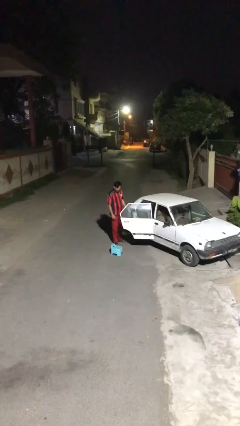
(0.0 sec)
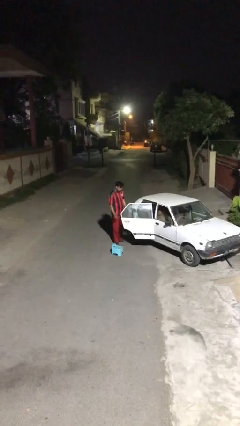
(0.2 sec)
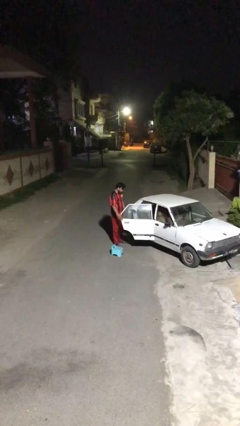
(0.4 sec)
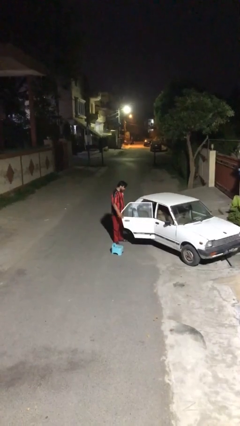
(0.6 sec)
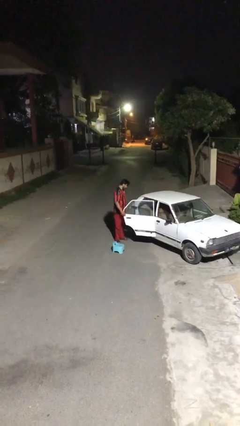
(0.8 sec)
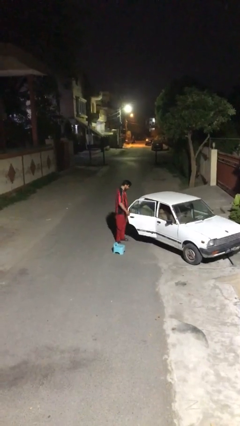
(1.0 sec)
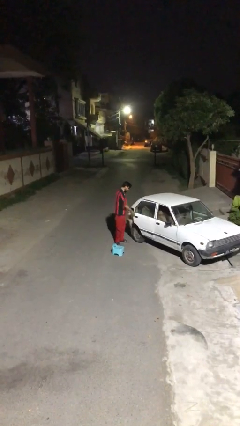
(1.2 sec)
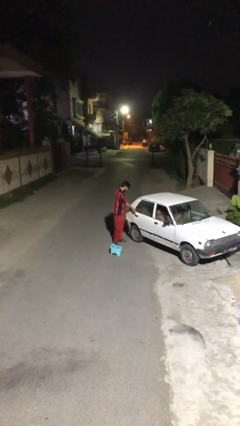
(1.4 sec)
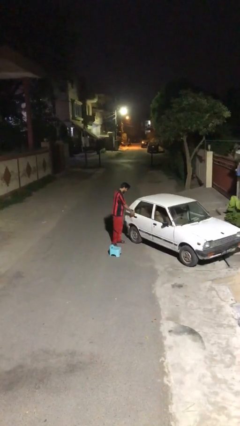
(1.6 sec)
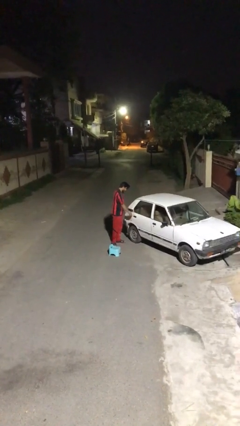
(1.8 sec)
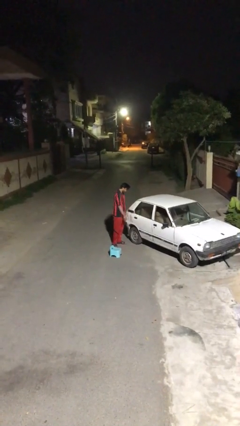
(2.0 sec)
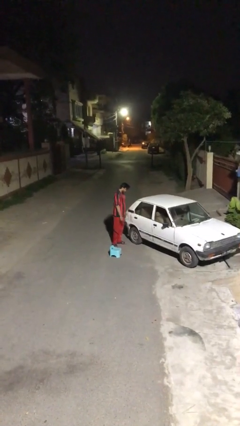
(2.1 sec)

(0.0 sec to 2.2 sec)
person closes car door

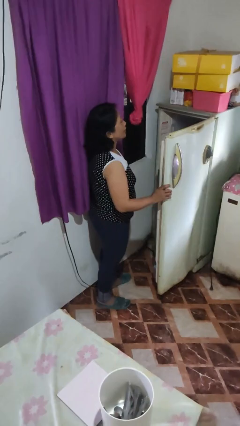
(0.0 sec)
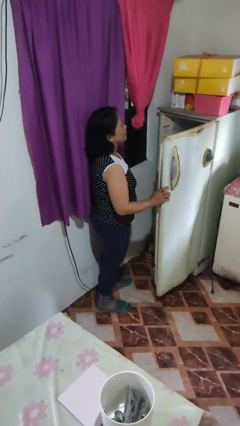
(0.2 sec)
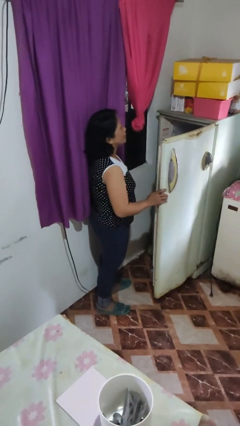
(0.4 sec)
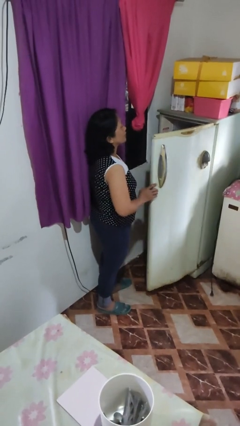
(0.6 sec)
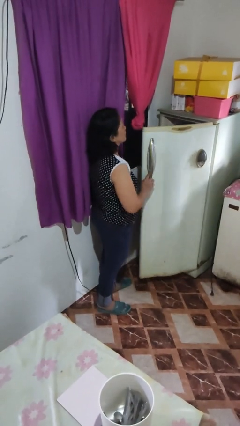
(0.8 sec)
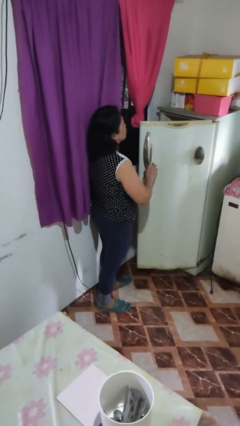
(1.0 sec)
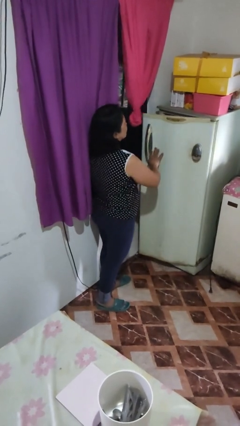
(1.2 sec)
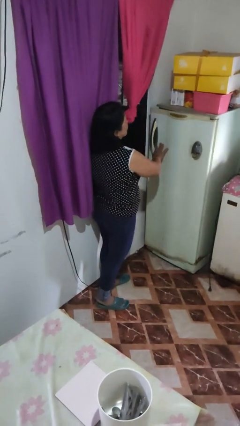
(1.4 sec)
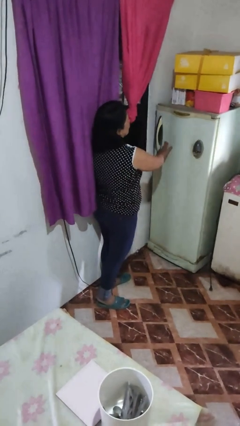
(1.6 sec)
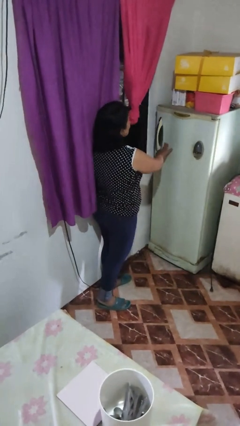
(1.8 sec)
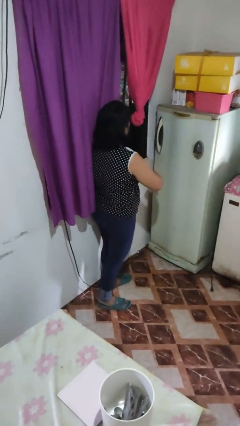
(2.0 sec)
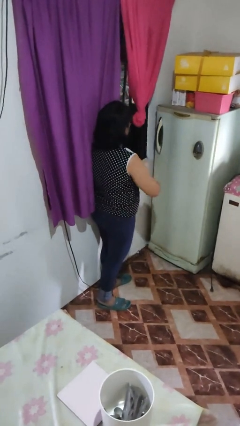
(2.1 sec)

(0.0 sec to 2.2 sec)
person closes refrigerator

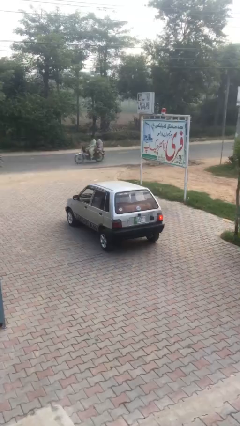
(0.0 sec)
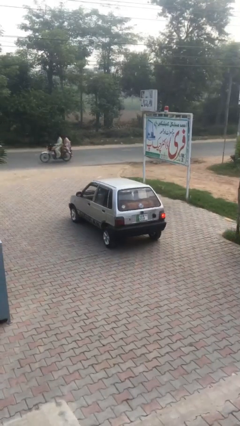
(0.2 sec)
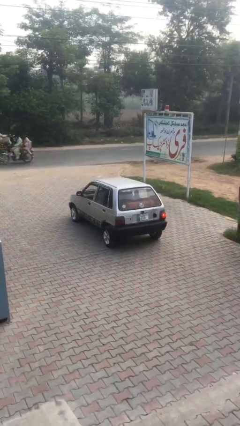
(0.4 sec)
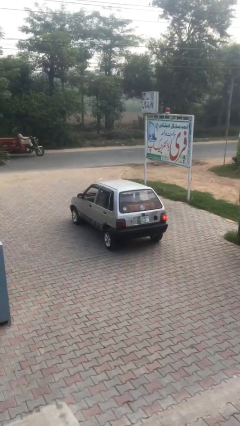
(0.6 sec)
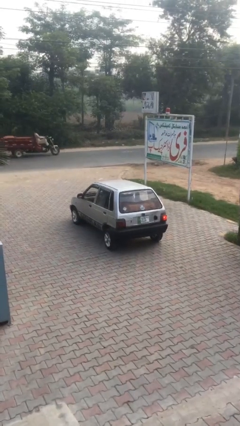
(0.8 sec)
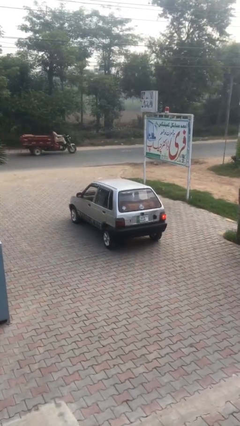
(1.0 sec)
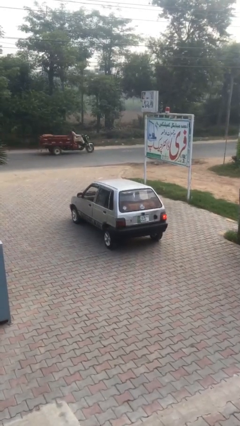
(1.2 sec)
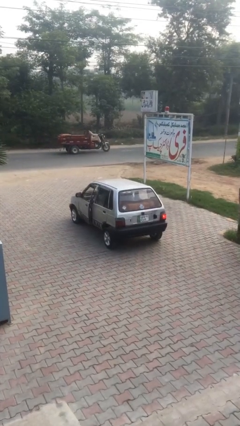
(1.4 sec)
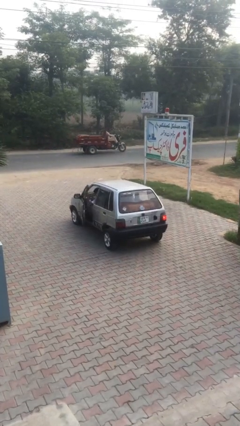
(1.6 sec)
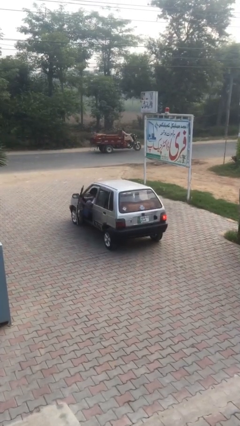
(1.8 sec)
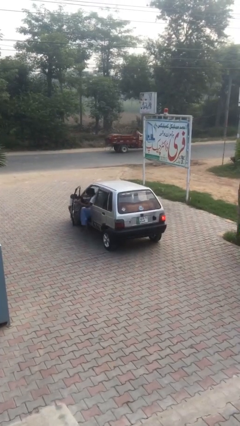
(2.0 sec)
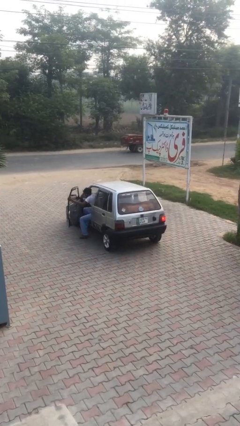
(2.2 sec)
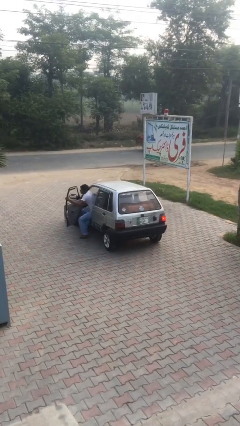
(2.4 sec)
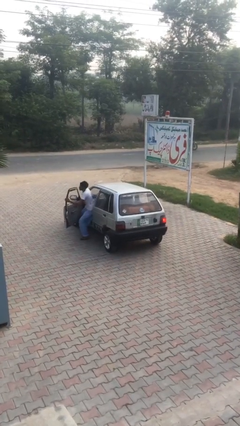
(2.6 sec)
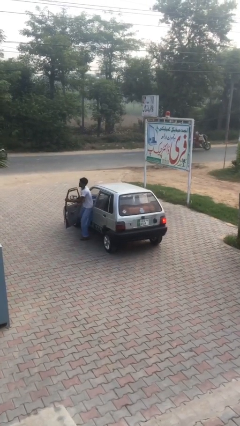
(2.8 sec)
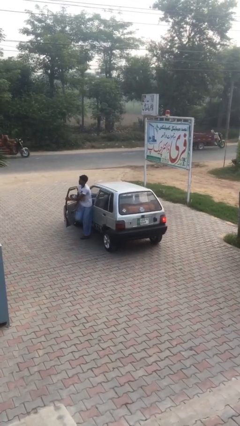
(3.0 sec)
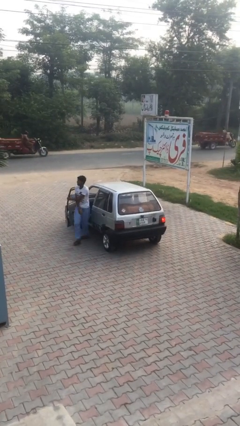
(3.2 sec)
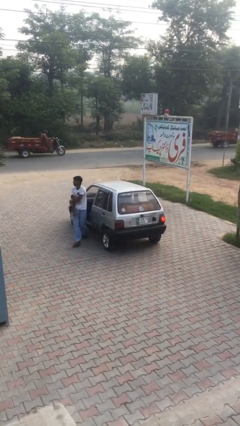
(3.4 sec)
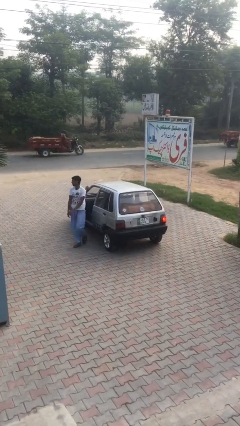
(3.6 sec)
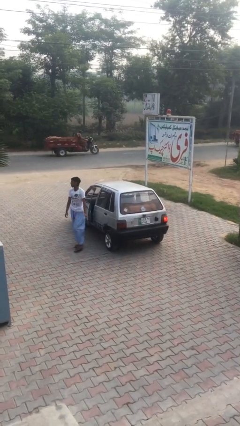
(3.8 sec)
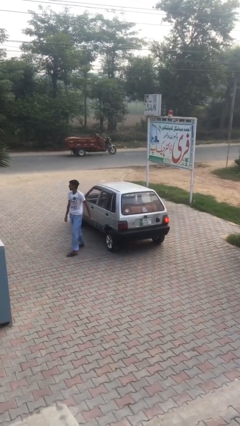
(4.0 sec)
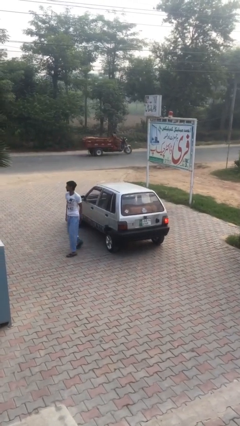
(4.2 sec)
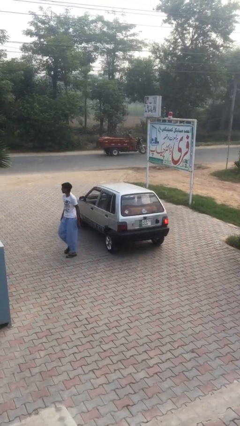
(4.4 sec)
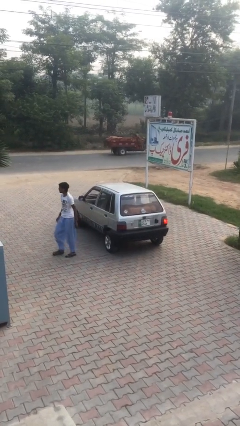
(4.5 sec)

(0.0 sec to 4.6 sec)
car drops off person

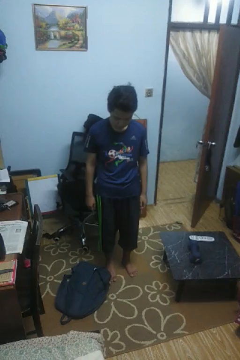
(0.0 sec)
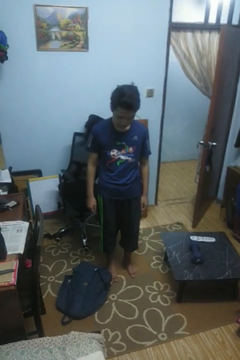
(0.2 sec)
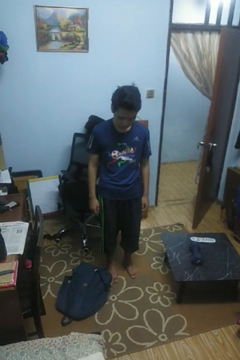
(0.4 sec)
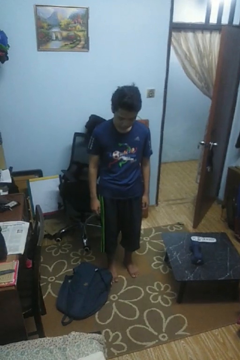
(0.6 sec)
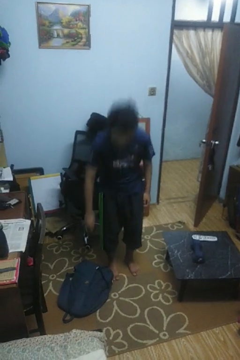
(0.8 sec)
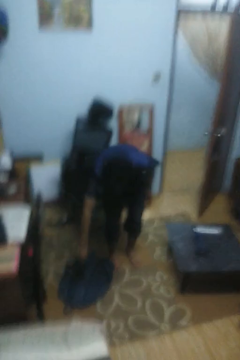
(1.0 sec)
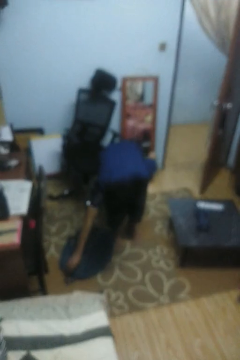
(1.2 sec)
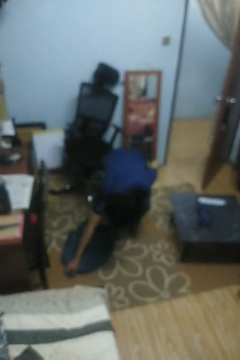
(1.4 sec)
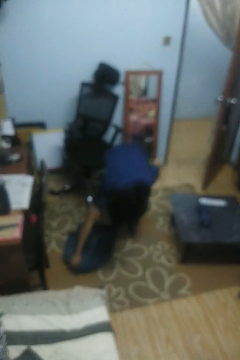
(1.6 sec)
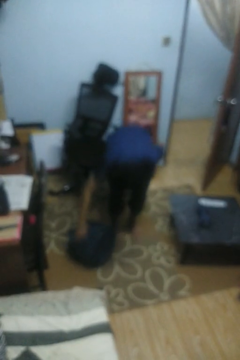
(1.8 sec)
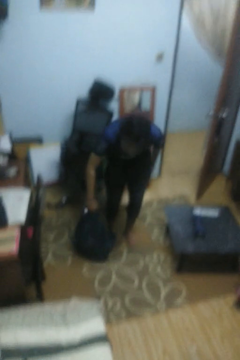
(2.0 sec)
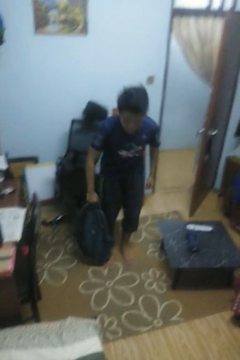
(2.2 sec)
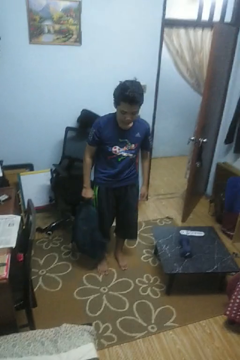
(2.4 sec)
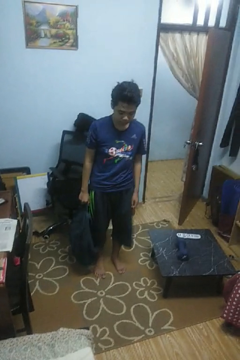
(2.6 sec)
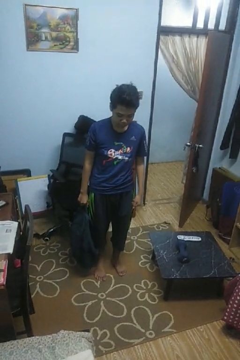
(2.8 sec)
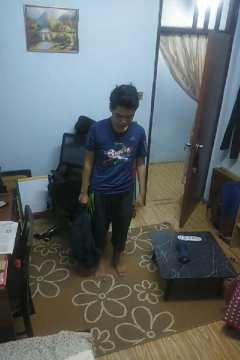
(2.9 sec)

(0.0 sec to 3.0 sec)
person picks up object from floor

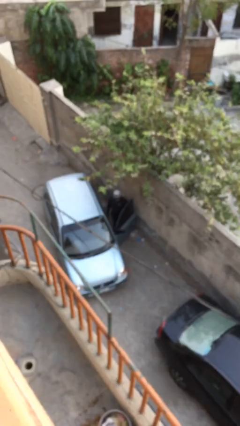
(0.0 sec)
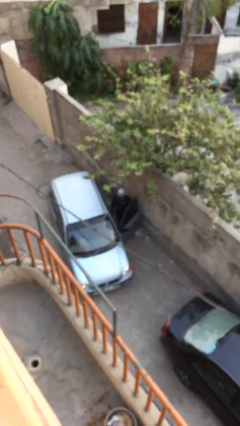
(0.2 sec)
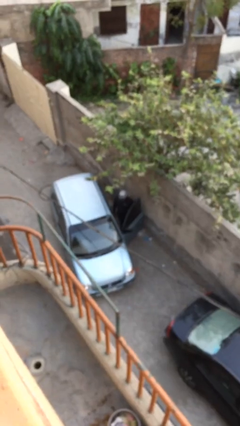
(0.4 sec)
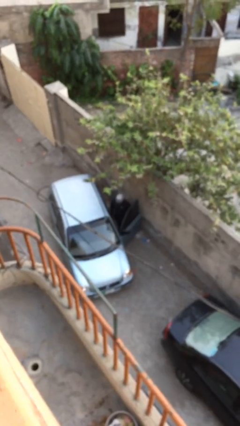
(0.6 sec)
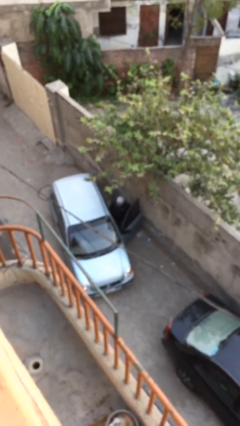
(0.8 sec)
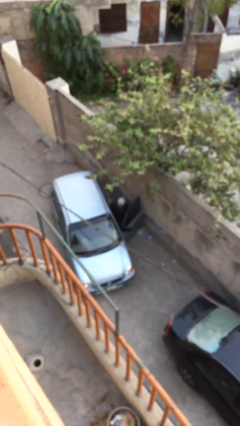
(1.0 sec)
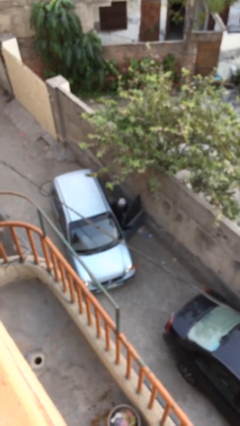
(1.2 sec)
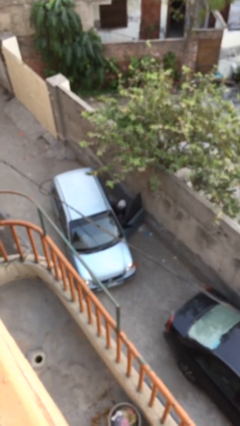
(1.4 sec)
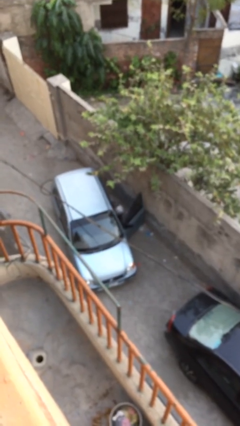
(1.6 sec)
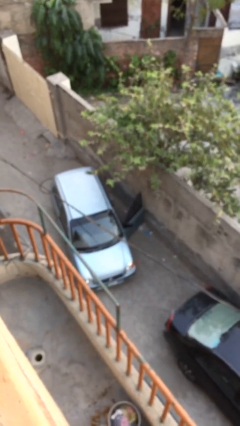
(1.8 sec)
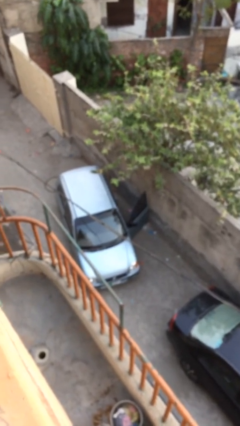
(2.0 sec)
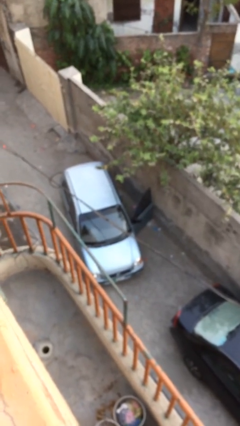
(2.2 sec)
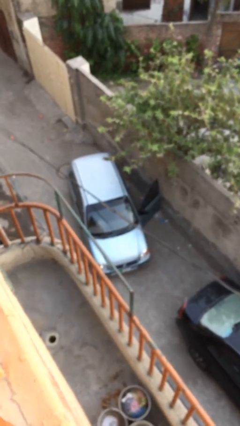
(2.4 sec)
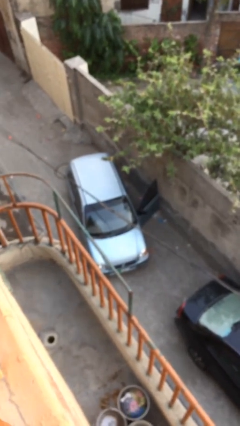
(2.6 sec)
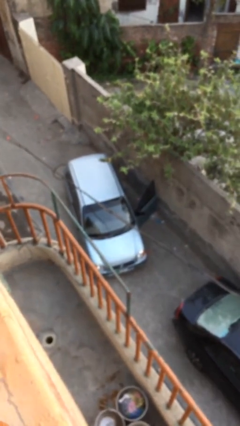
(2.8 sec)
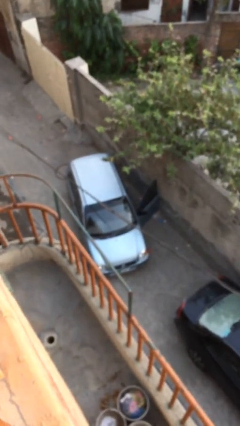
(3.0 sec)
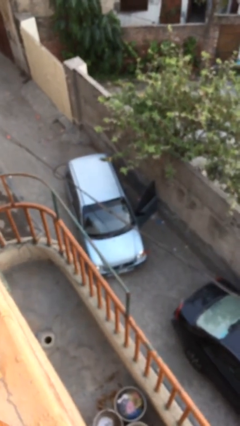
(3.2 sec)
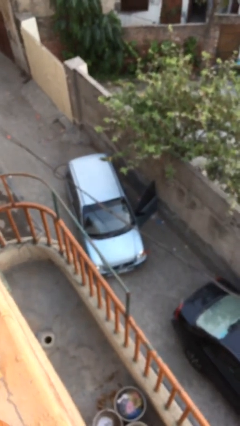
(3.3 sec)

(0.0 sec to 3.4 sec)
person enters car

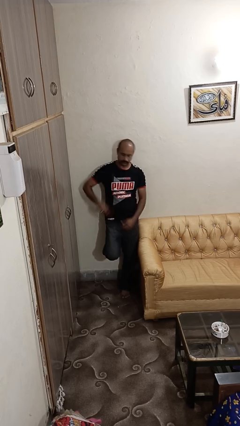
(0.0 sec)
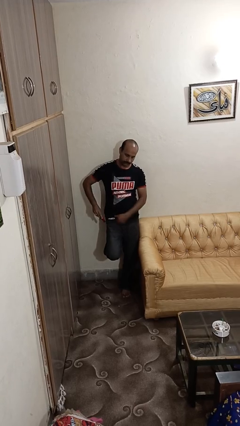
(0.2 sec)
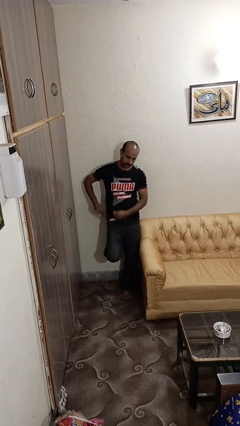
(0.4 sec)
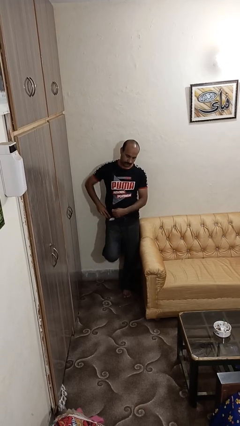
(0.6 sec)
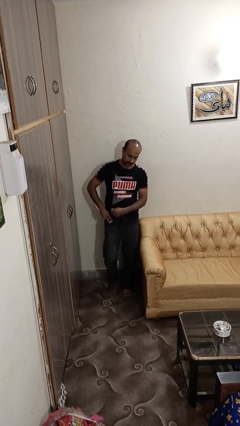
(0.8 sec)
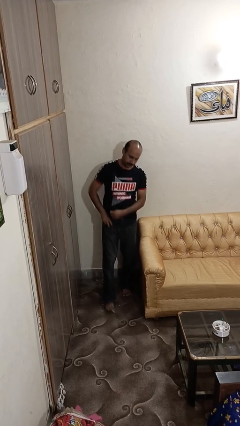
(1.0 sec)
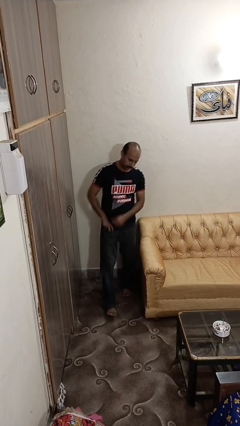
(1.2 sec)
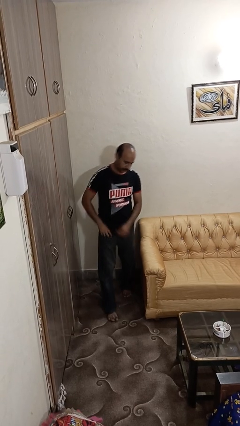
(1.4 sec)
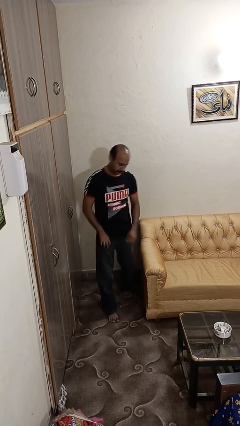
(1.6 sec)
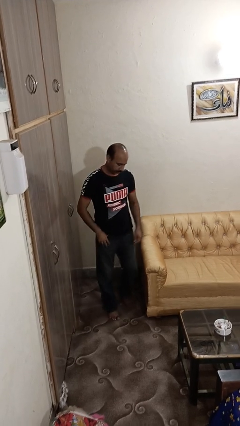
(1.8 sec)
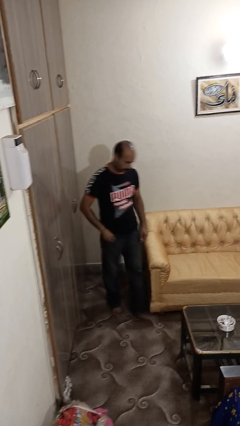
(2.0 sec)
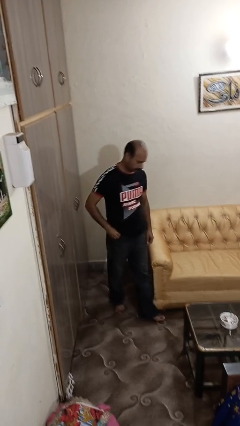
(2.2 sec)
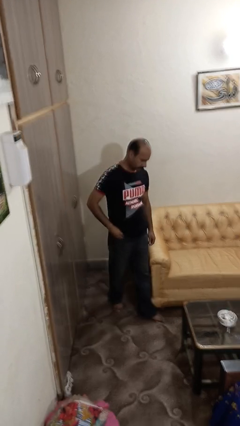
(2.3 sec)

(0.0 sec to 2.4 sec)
person puts phone into pocket
